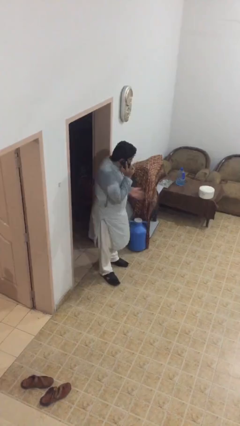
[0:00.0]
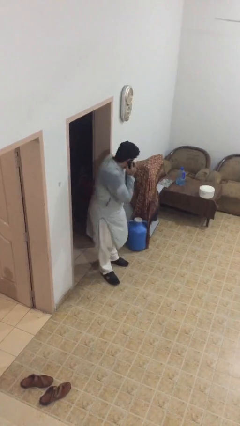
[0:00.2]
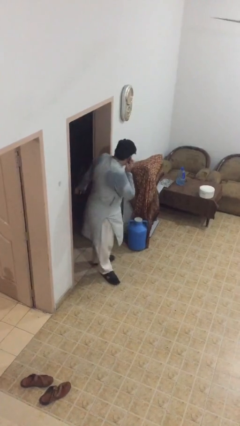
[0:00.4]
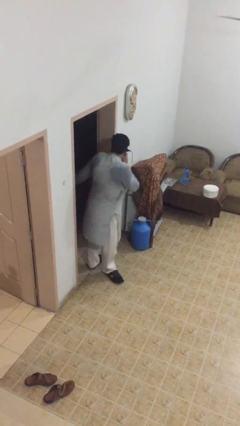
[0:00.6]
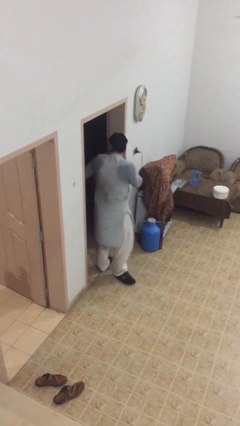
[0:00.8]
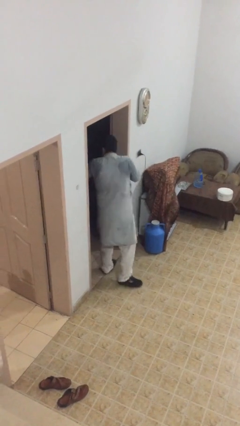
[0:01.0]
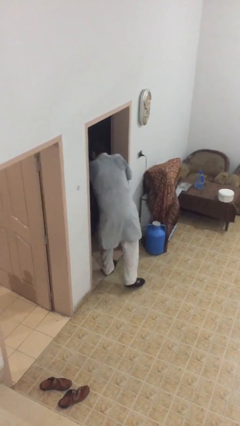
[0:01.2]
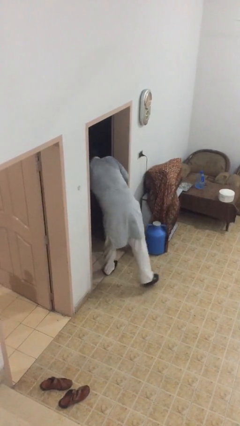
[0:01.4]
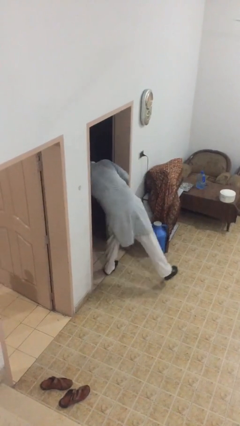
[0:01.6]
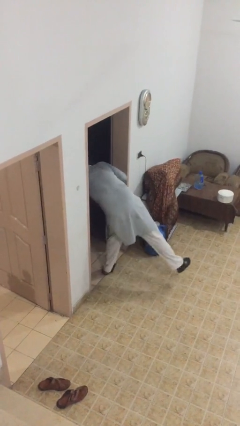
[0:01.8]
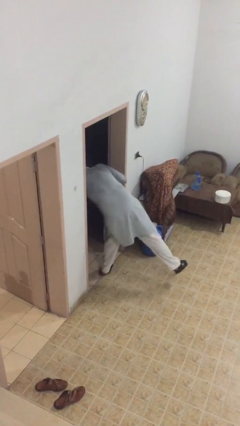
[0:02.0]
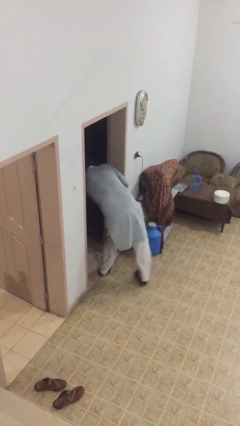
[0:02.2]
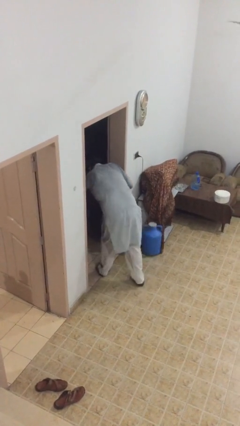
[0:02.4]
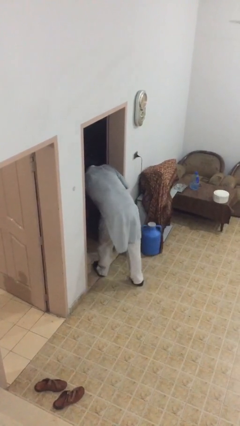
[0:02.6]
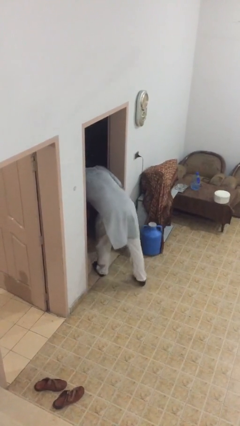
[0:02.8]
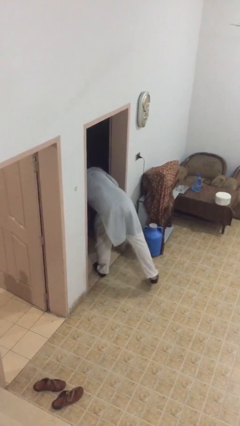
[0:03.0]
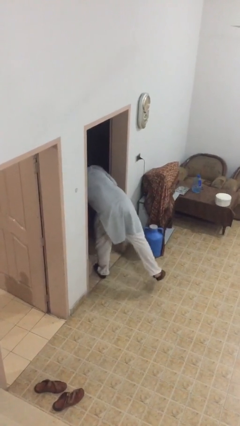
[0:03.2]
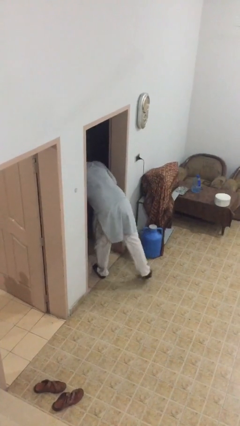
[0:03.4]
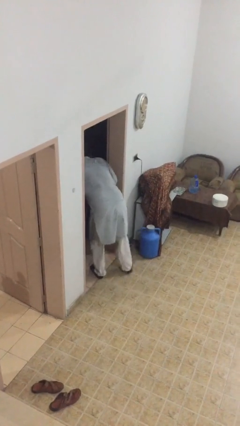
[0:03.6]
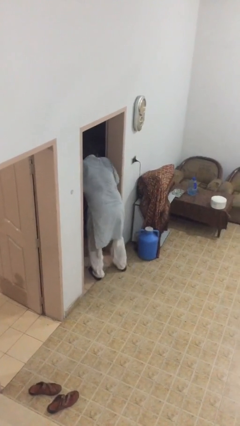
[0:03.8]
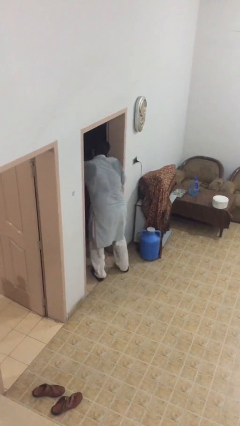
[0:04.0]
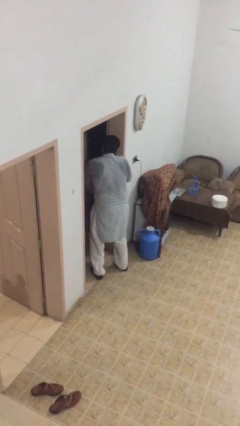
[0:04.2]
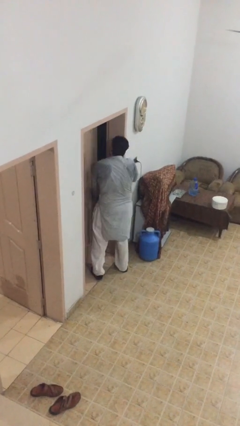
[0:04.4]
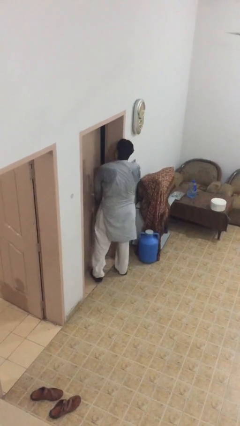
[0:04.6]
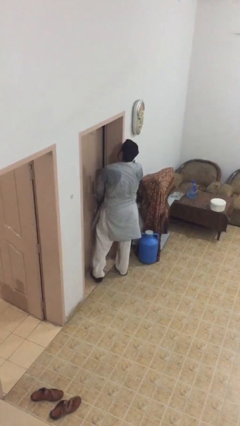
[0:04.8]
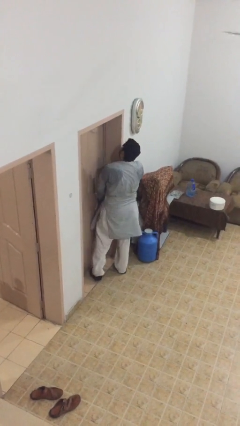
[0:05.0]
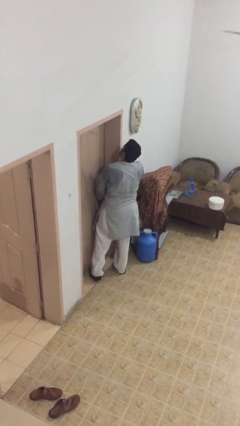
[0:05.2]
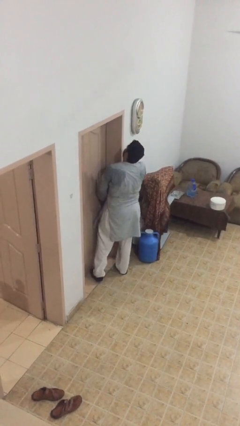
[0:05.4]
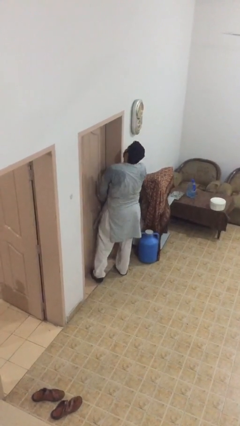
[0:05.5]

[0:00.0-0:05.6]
person closes facility door

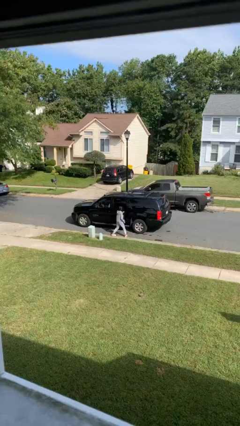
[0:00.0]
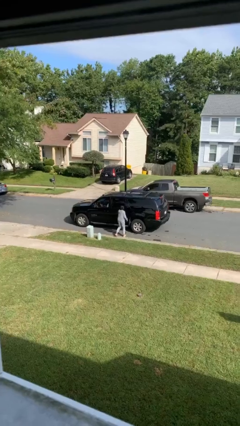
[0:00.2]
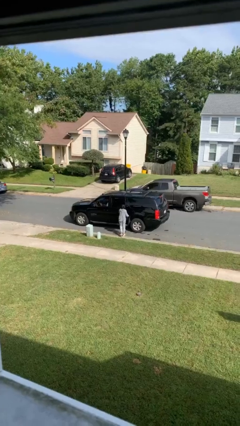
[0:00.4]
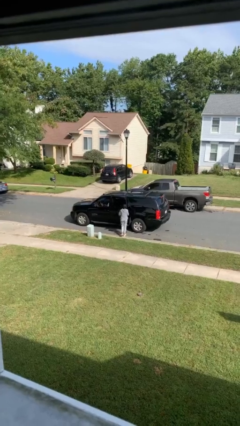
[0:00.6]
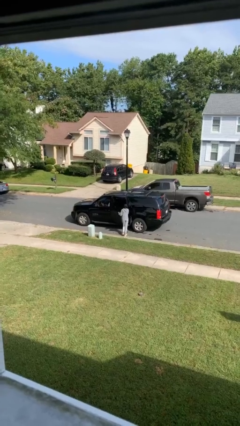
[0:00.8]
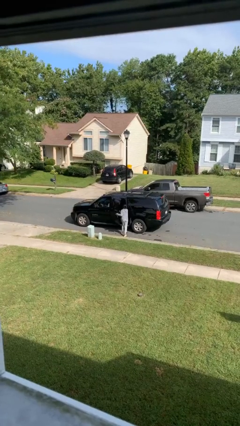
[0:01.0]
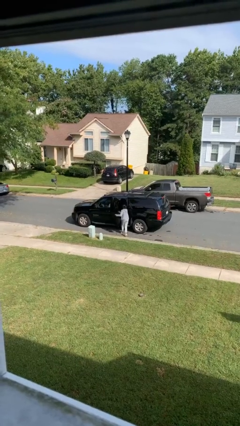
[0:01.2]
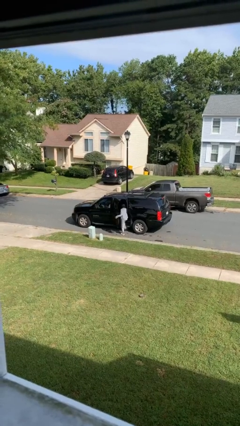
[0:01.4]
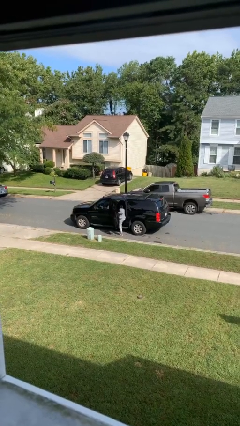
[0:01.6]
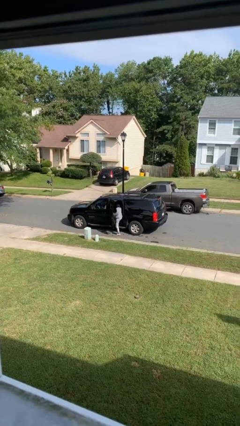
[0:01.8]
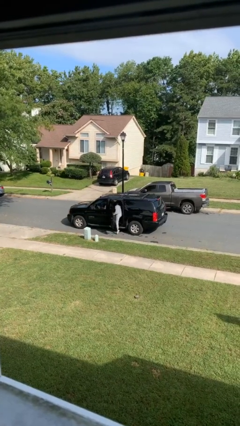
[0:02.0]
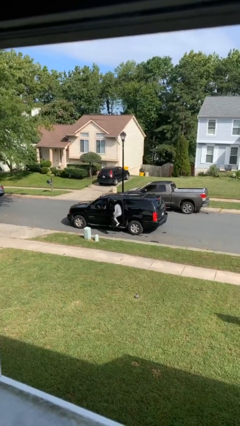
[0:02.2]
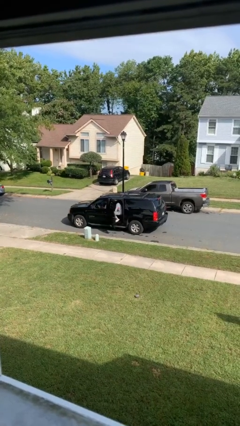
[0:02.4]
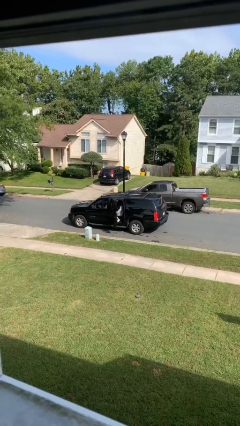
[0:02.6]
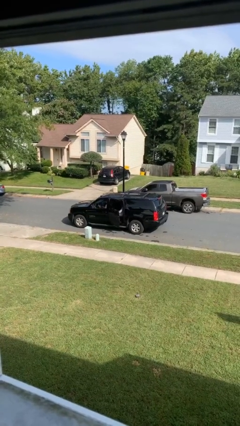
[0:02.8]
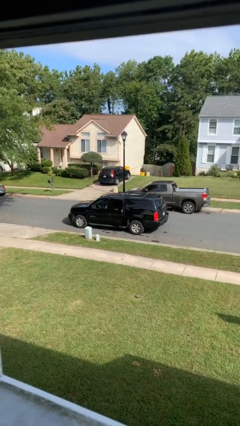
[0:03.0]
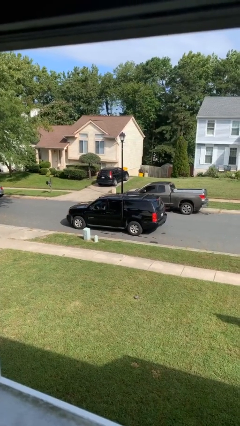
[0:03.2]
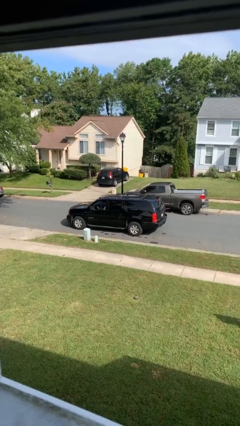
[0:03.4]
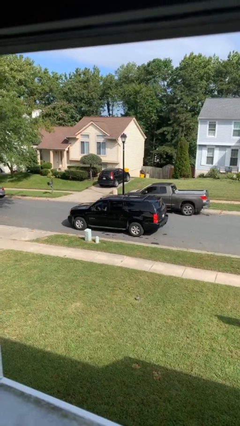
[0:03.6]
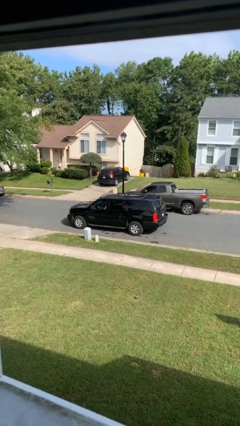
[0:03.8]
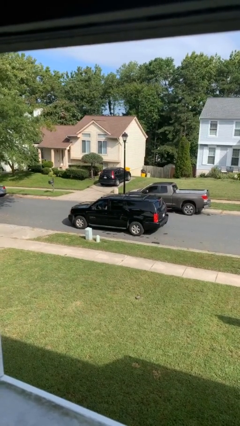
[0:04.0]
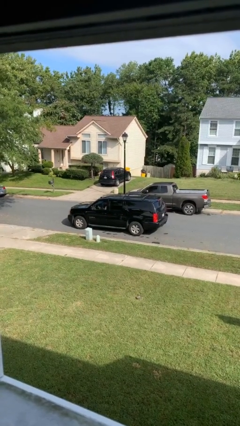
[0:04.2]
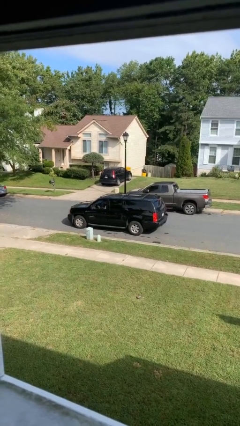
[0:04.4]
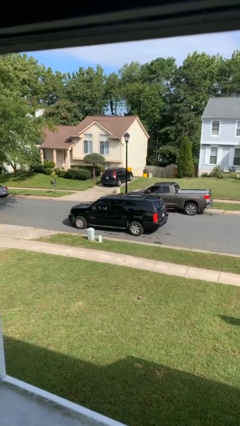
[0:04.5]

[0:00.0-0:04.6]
car picks up person

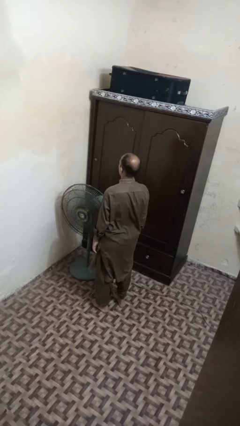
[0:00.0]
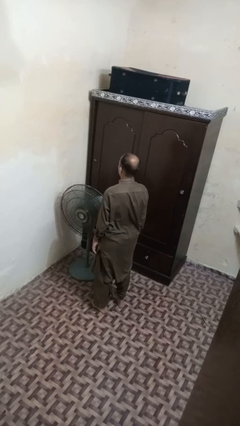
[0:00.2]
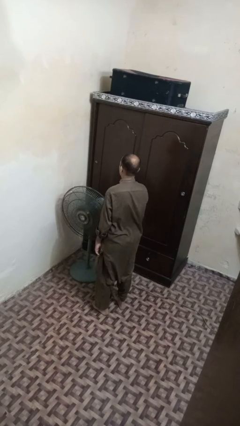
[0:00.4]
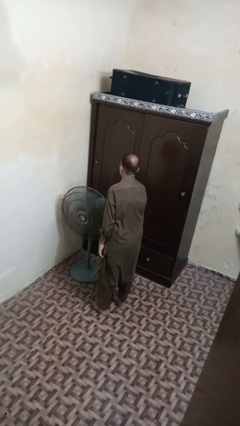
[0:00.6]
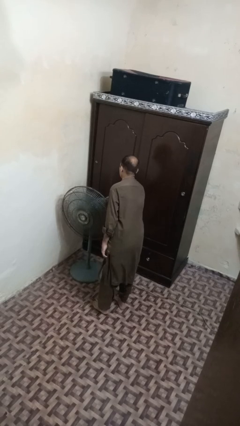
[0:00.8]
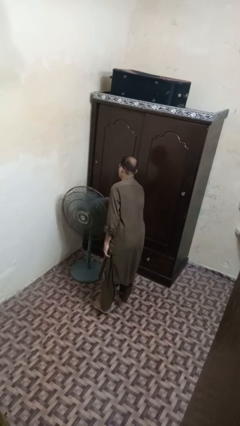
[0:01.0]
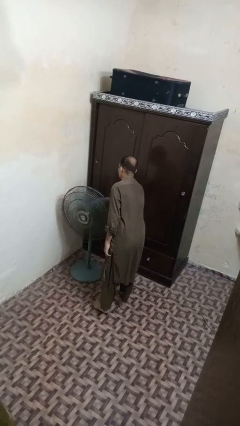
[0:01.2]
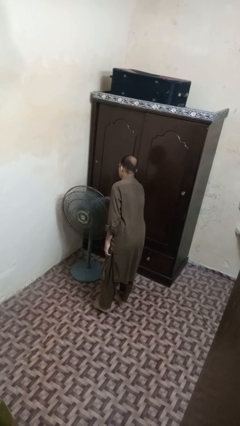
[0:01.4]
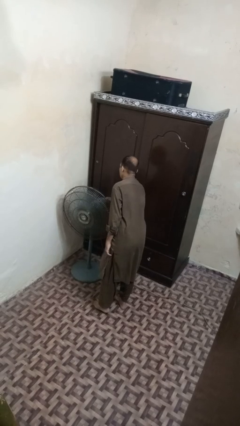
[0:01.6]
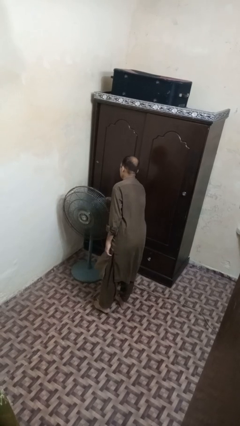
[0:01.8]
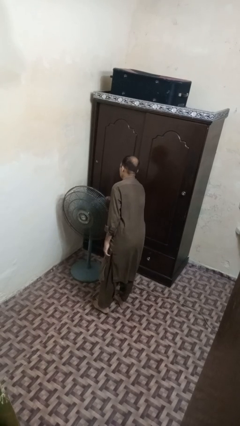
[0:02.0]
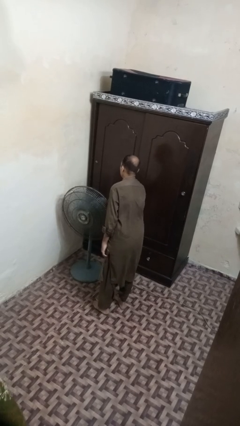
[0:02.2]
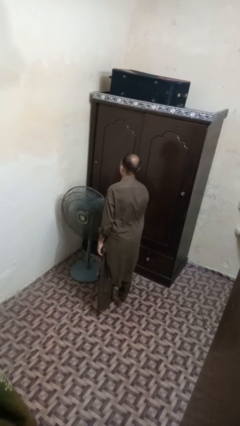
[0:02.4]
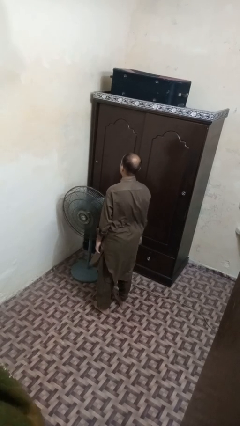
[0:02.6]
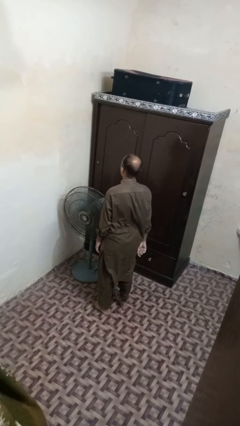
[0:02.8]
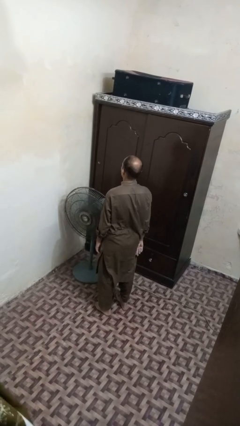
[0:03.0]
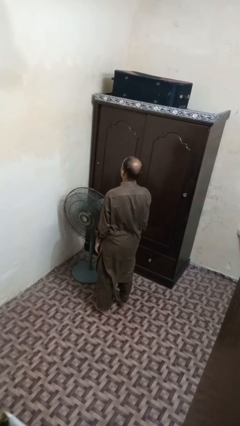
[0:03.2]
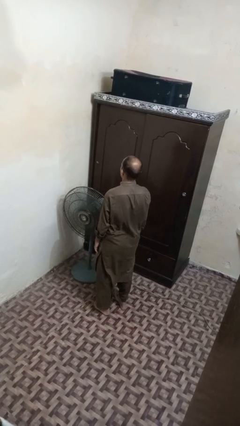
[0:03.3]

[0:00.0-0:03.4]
person turns off fan

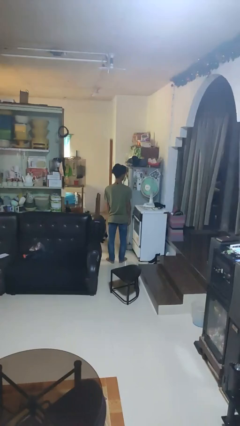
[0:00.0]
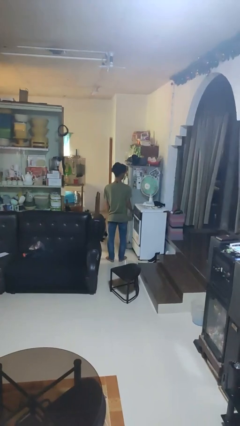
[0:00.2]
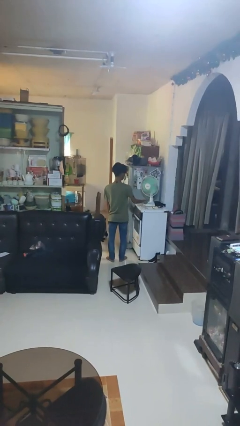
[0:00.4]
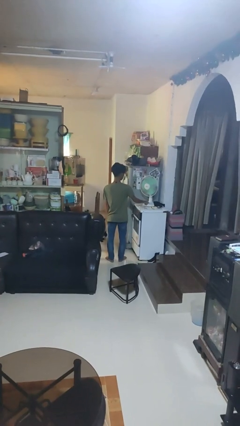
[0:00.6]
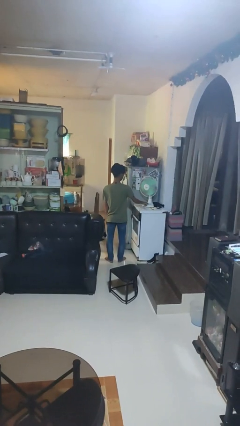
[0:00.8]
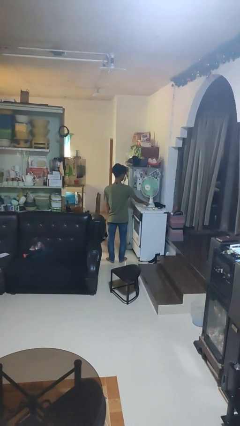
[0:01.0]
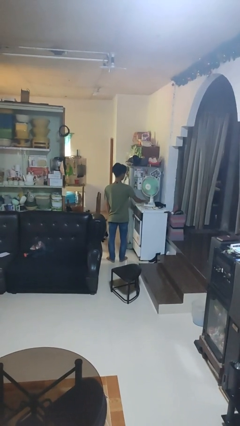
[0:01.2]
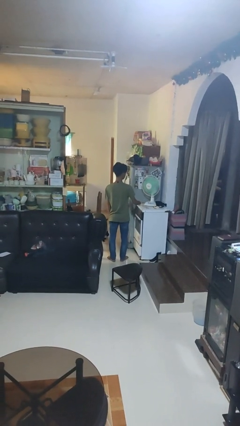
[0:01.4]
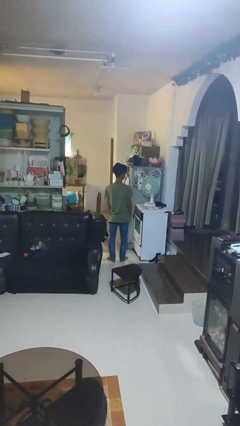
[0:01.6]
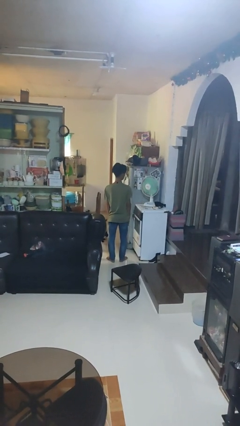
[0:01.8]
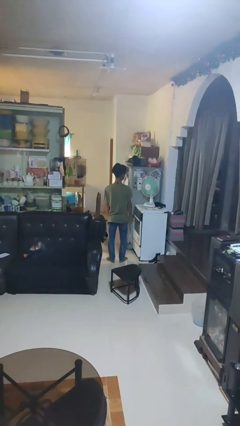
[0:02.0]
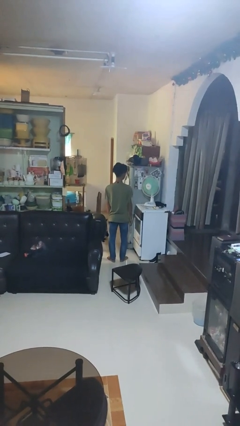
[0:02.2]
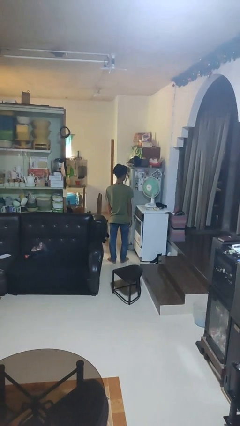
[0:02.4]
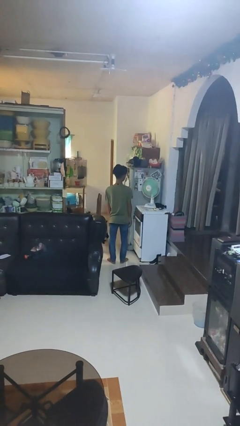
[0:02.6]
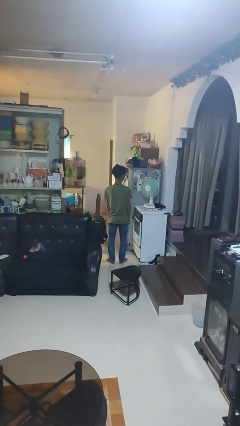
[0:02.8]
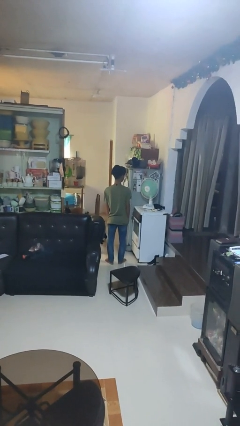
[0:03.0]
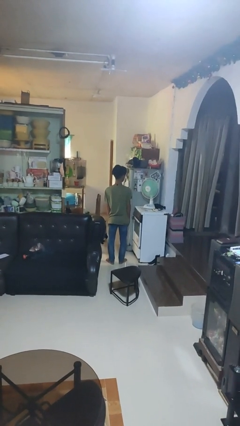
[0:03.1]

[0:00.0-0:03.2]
person turns on fan

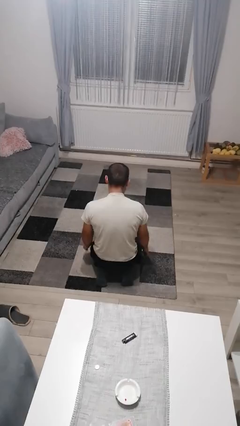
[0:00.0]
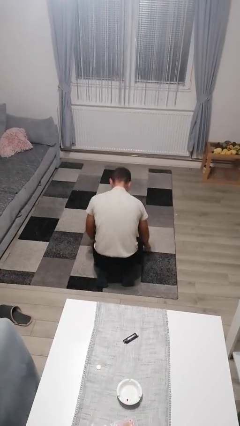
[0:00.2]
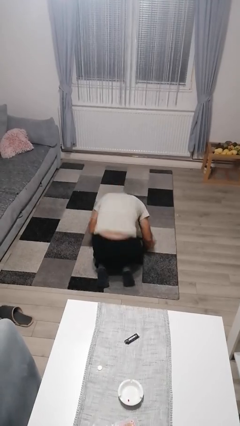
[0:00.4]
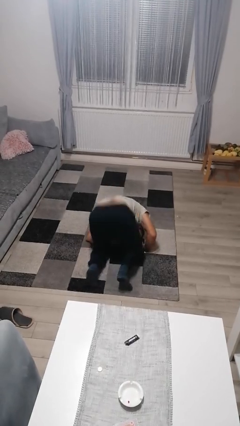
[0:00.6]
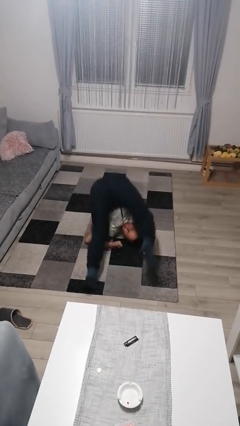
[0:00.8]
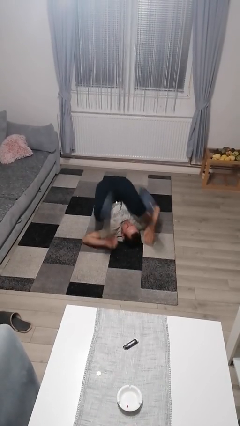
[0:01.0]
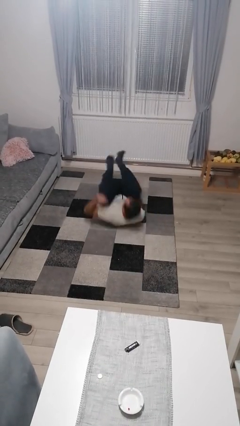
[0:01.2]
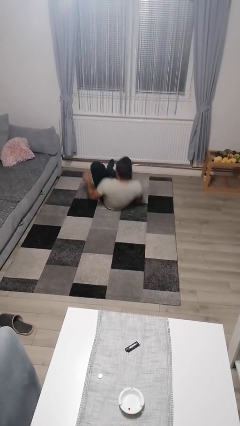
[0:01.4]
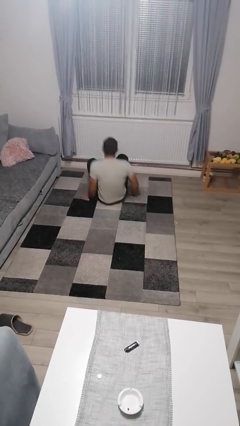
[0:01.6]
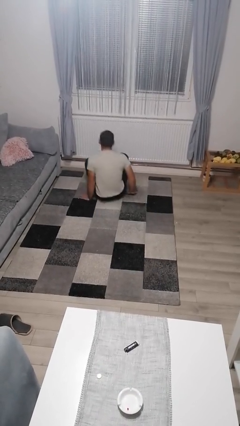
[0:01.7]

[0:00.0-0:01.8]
person somersaults
